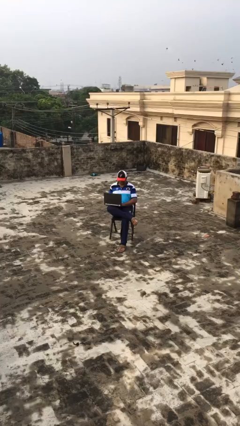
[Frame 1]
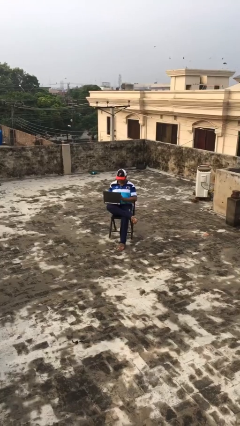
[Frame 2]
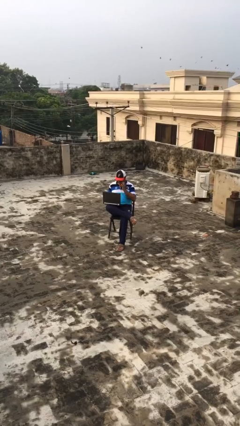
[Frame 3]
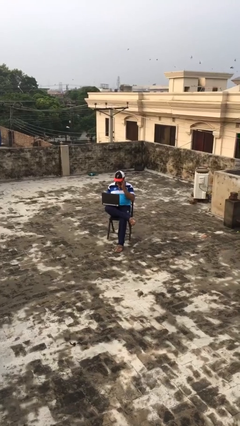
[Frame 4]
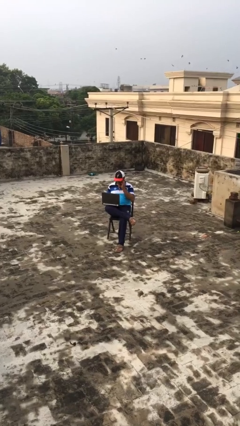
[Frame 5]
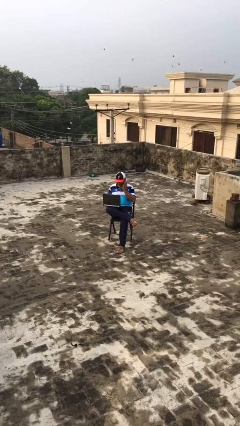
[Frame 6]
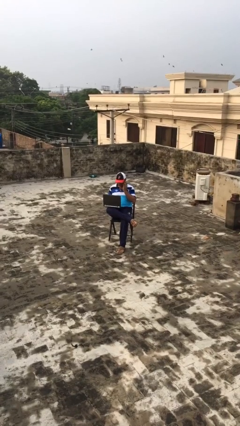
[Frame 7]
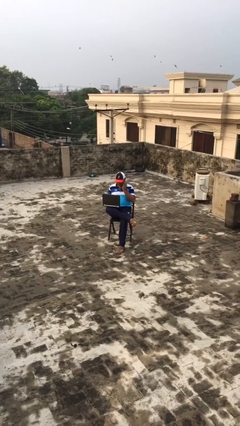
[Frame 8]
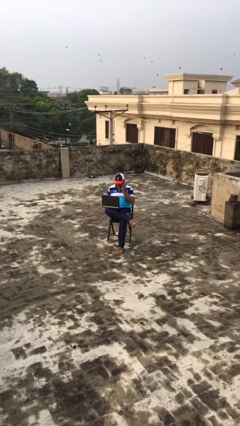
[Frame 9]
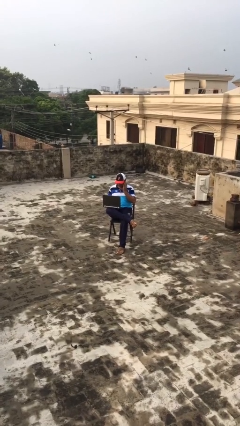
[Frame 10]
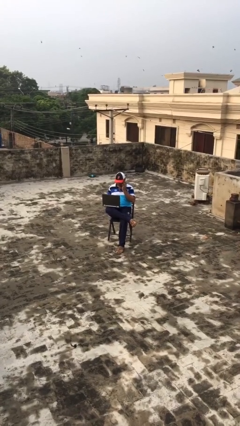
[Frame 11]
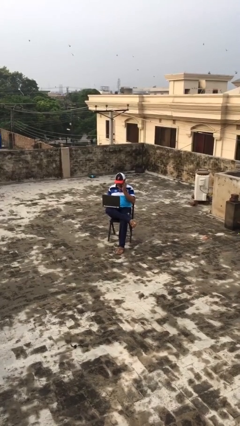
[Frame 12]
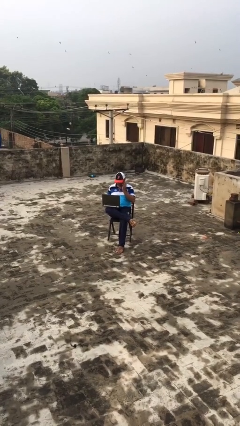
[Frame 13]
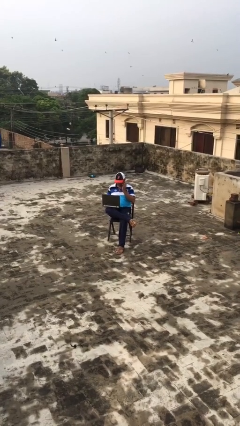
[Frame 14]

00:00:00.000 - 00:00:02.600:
person interacts with laptop

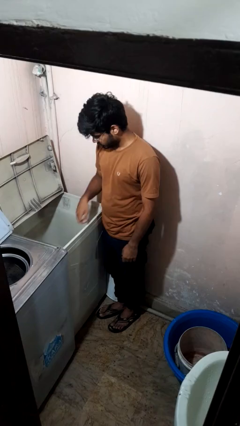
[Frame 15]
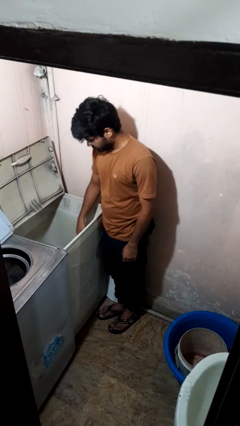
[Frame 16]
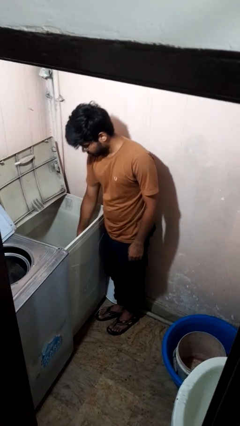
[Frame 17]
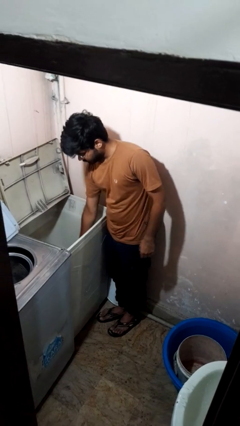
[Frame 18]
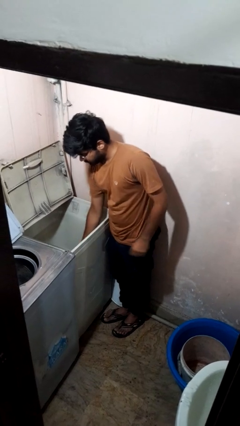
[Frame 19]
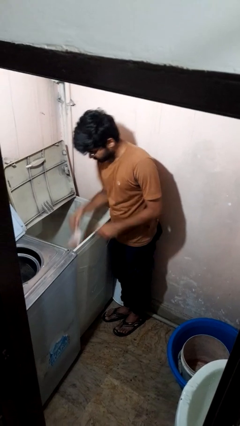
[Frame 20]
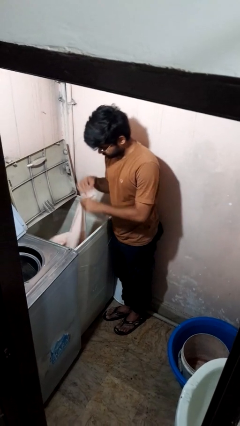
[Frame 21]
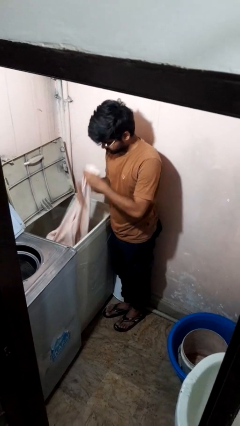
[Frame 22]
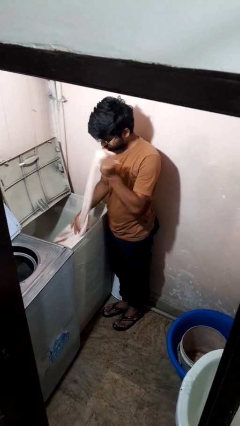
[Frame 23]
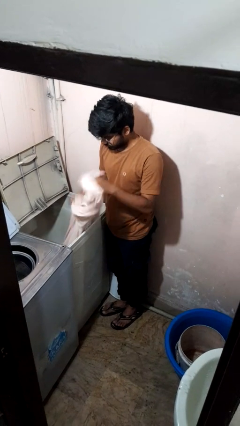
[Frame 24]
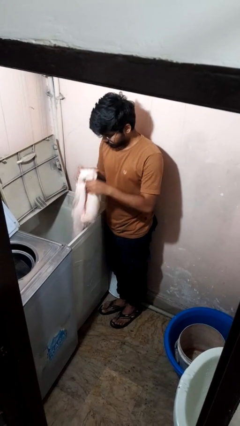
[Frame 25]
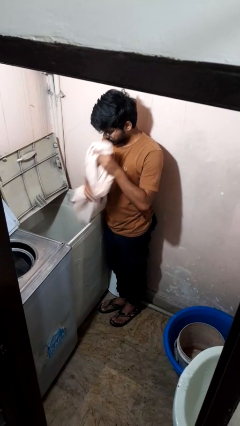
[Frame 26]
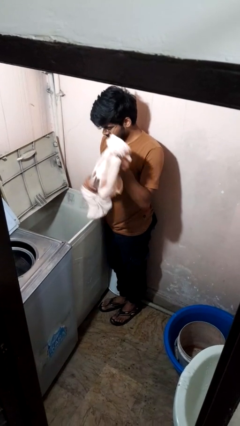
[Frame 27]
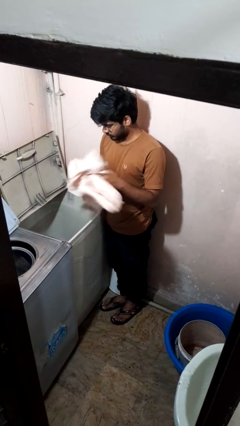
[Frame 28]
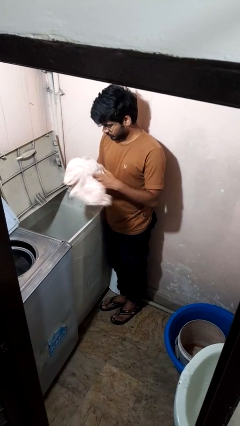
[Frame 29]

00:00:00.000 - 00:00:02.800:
person unloads clotheswasher

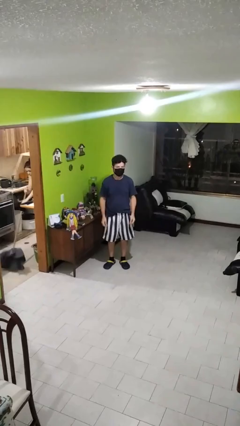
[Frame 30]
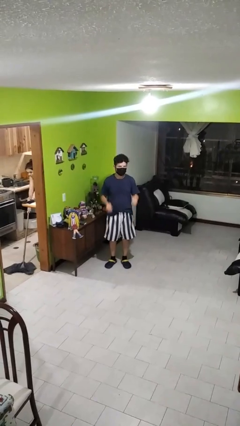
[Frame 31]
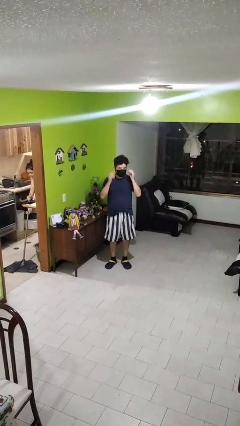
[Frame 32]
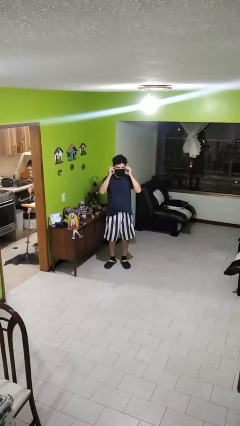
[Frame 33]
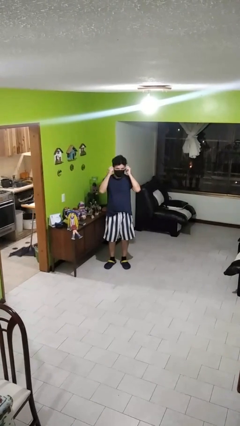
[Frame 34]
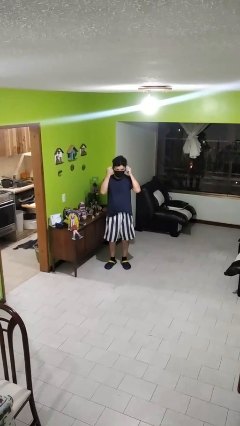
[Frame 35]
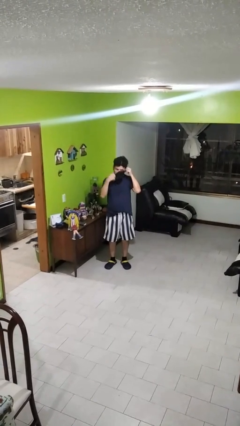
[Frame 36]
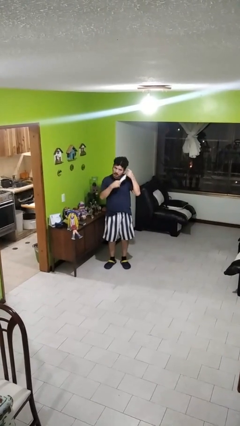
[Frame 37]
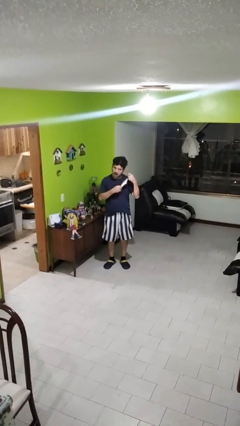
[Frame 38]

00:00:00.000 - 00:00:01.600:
person takes off facemask

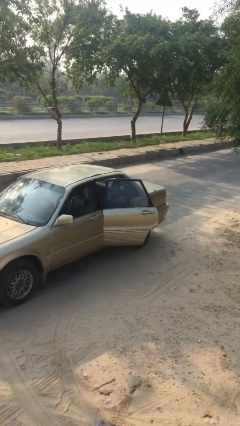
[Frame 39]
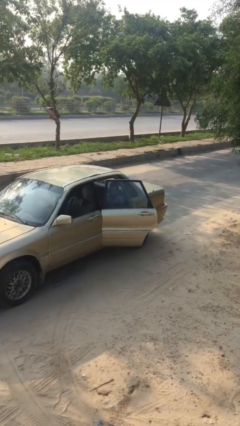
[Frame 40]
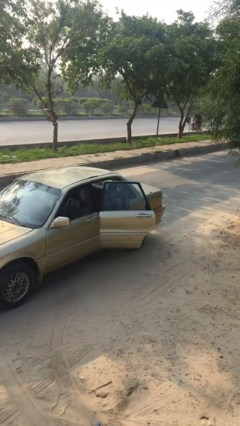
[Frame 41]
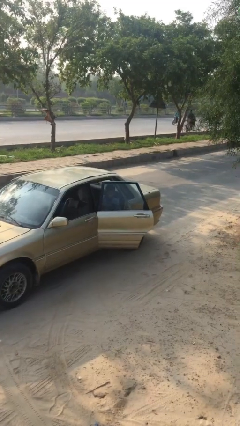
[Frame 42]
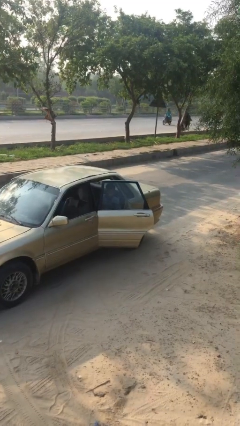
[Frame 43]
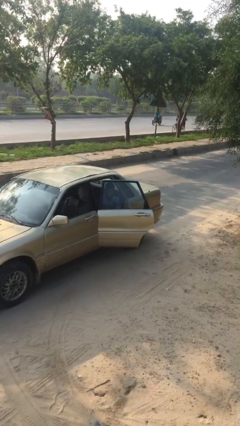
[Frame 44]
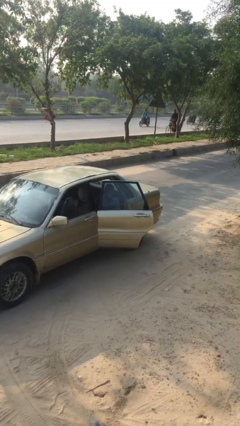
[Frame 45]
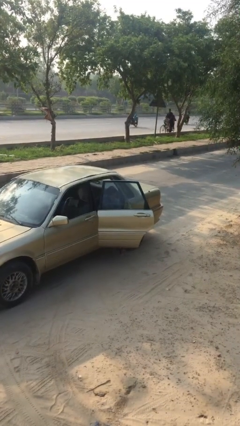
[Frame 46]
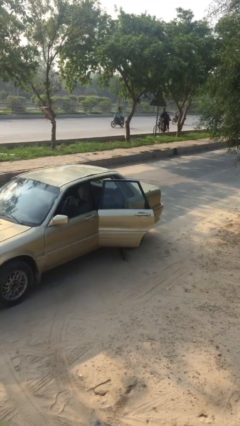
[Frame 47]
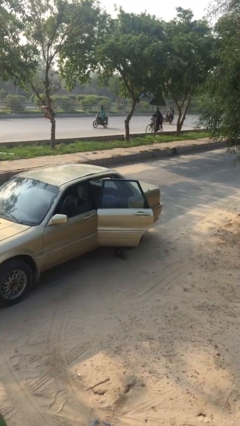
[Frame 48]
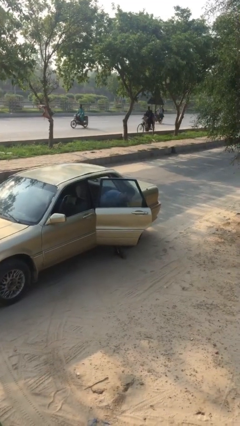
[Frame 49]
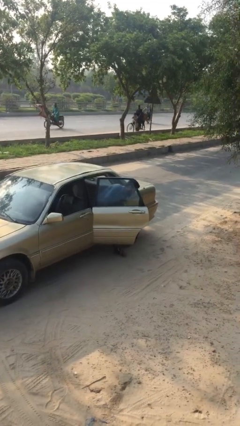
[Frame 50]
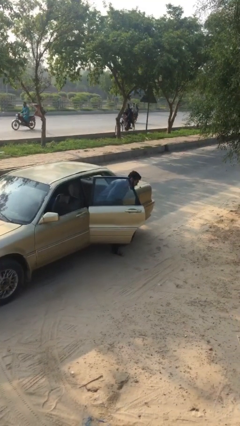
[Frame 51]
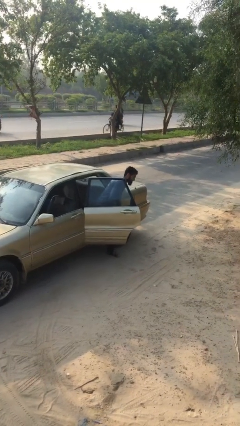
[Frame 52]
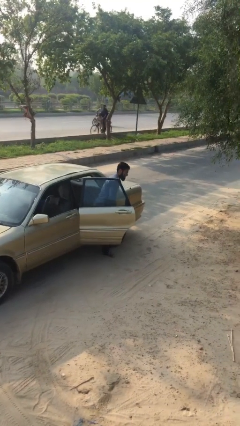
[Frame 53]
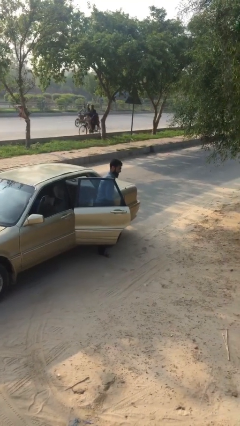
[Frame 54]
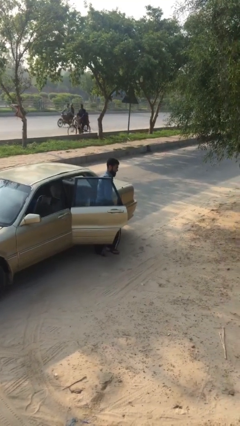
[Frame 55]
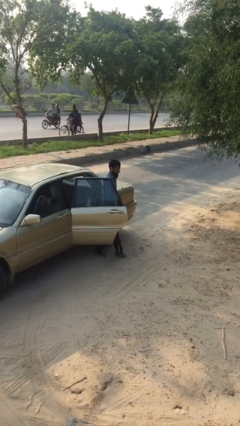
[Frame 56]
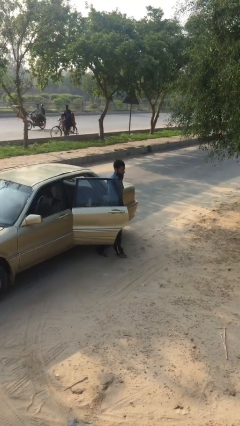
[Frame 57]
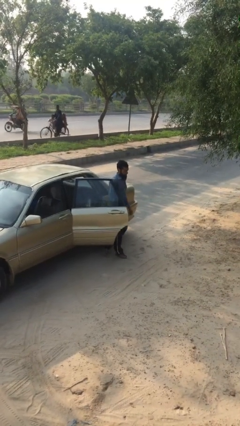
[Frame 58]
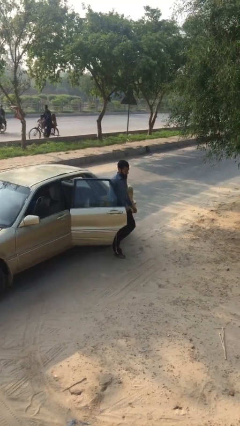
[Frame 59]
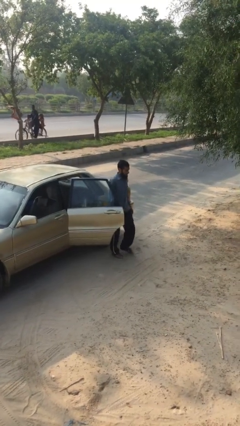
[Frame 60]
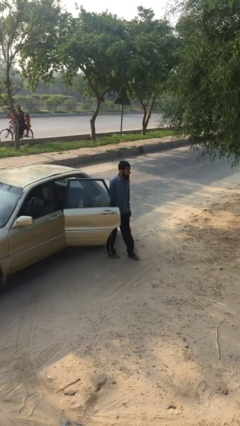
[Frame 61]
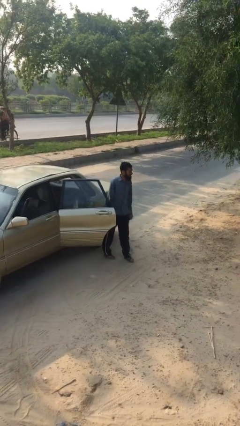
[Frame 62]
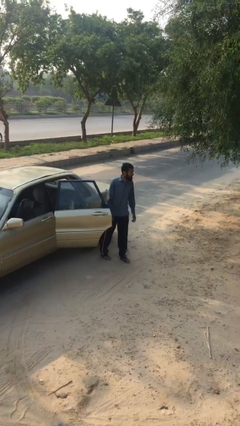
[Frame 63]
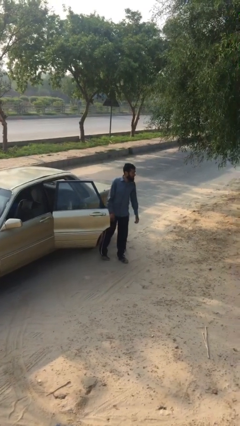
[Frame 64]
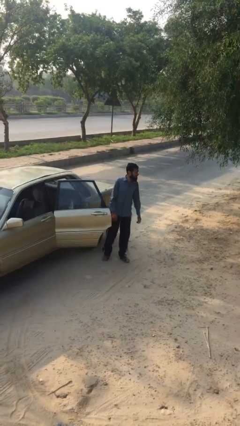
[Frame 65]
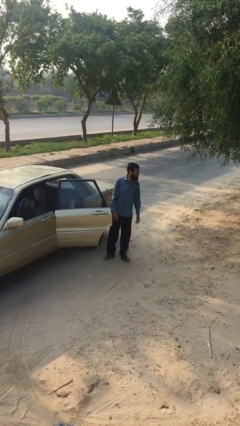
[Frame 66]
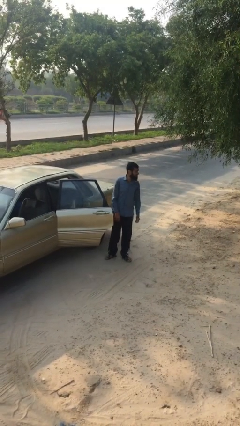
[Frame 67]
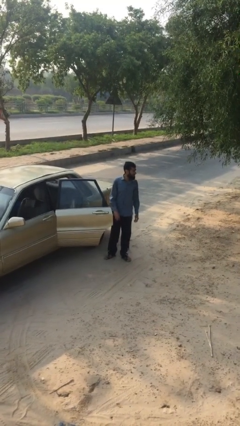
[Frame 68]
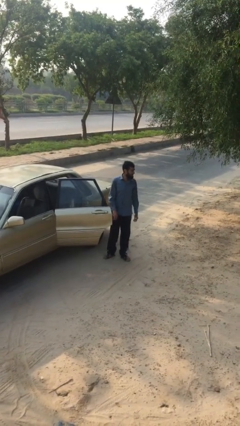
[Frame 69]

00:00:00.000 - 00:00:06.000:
person exits car

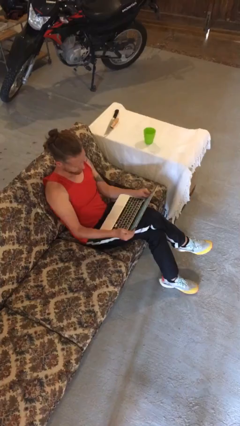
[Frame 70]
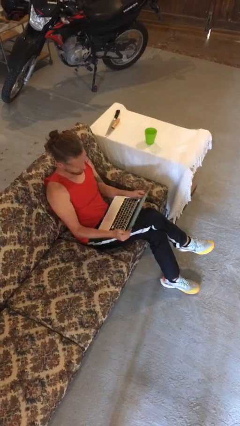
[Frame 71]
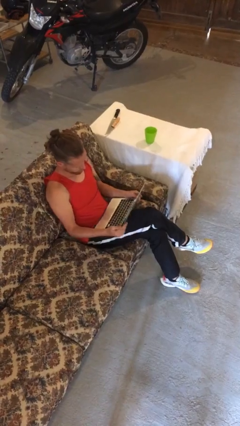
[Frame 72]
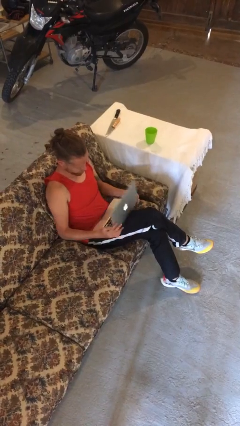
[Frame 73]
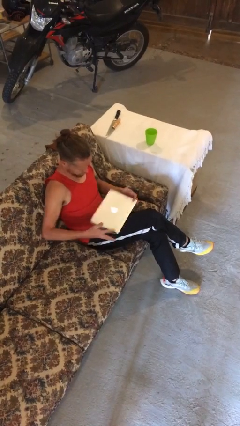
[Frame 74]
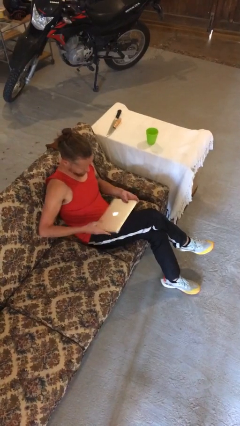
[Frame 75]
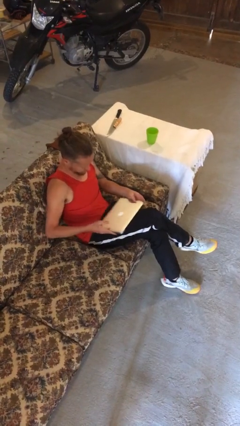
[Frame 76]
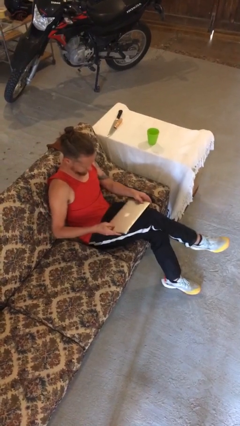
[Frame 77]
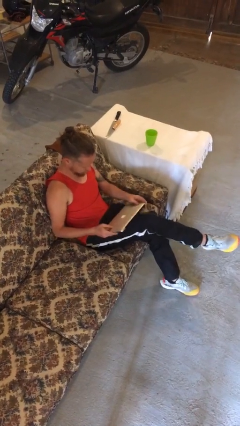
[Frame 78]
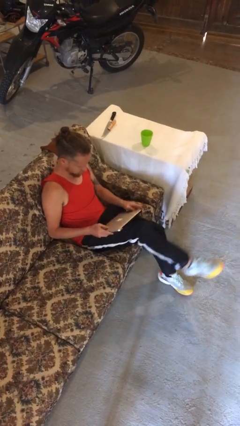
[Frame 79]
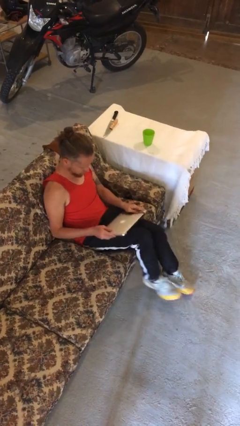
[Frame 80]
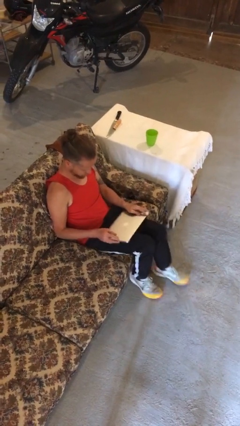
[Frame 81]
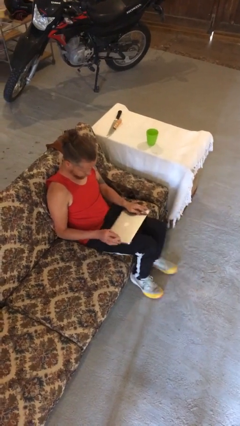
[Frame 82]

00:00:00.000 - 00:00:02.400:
person closes laptop

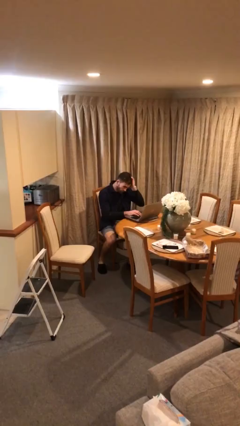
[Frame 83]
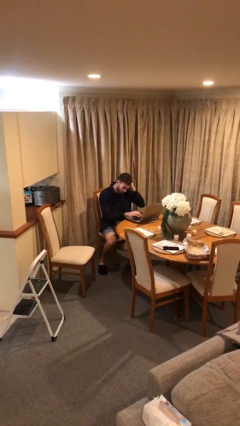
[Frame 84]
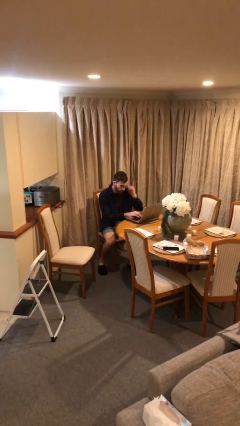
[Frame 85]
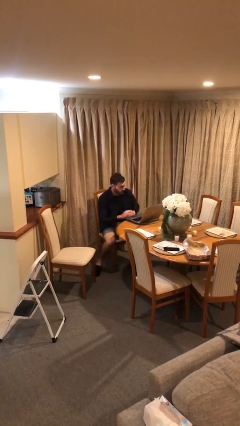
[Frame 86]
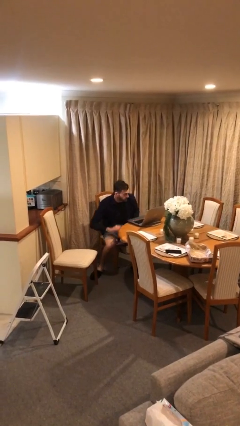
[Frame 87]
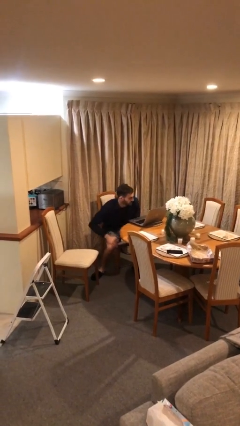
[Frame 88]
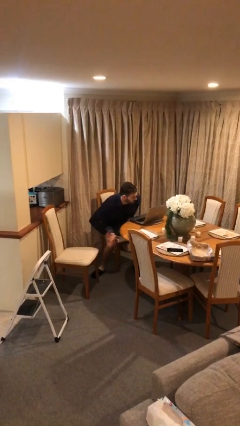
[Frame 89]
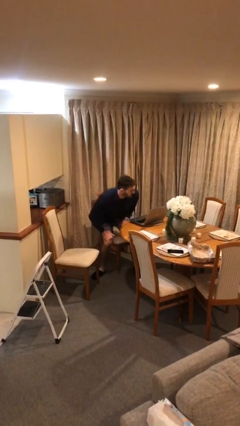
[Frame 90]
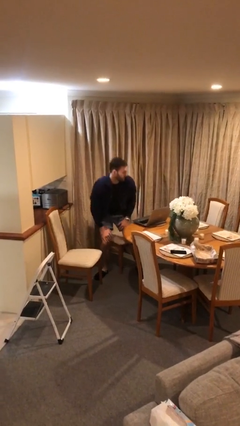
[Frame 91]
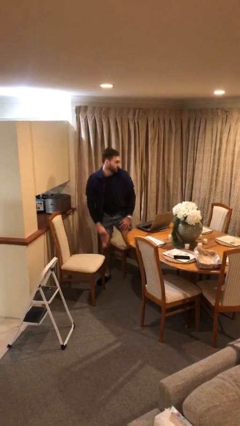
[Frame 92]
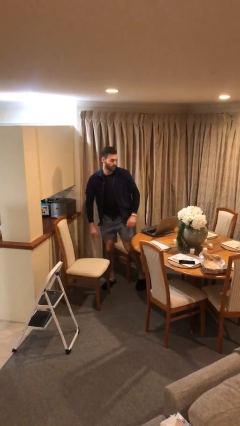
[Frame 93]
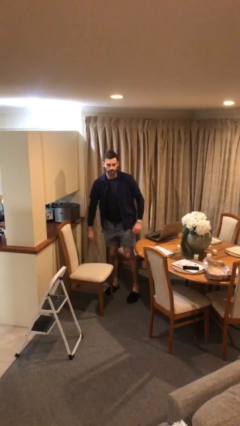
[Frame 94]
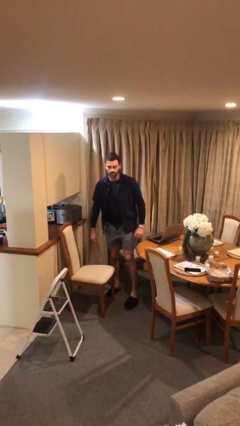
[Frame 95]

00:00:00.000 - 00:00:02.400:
person stands up
